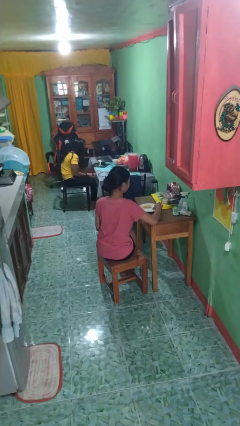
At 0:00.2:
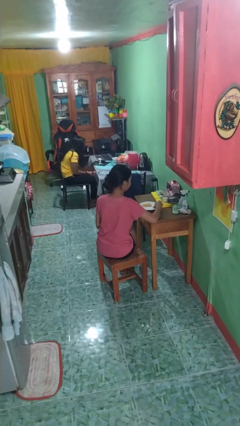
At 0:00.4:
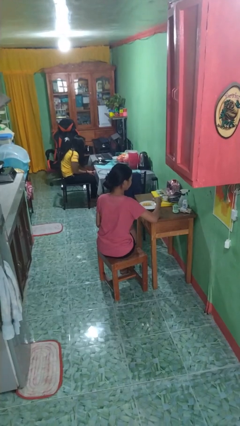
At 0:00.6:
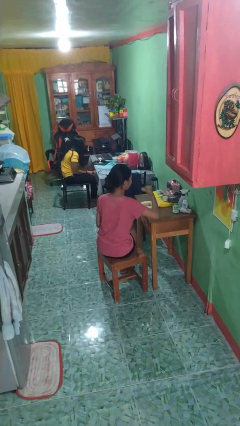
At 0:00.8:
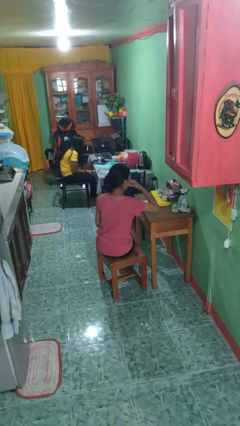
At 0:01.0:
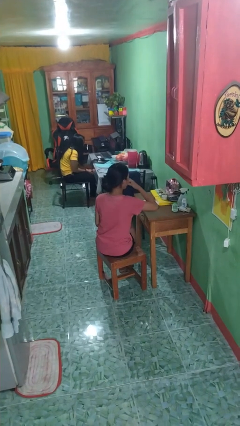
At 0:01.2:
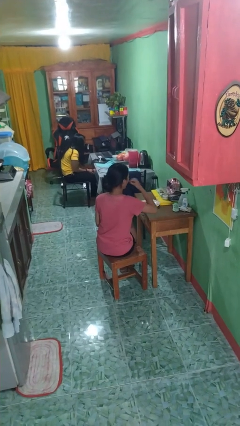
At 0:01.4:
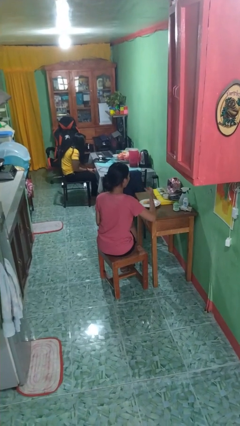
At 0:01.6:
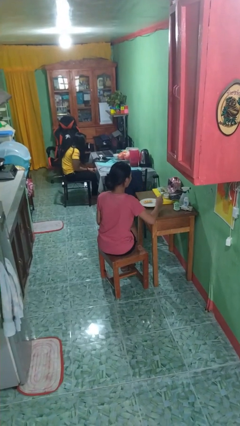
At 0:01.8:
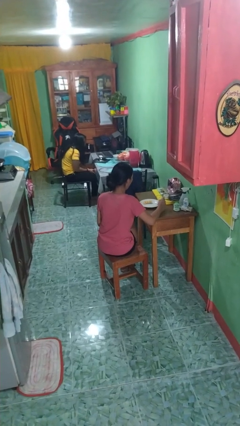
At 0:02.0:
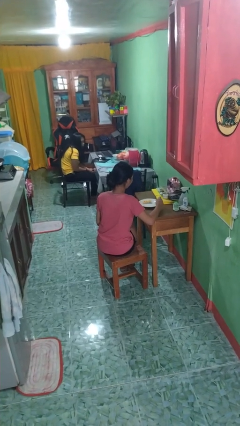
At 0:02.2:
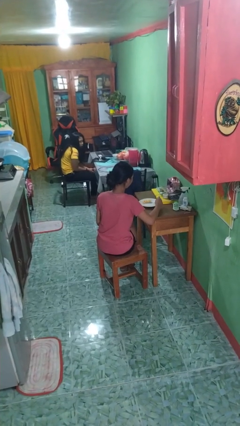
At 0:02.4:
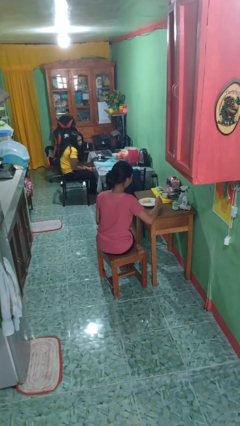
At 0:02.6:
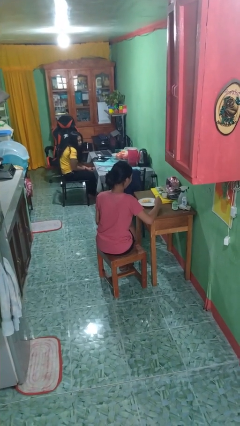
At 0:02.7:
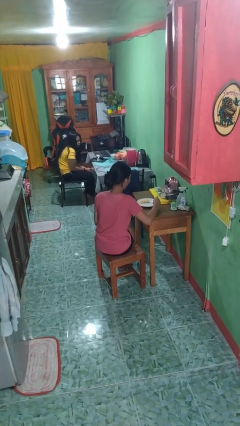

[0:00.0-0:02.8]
person eats with hands

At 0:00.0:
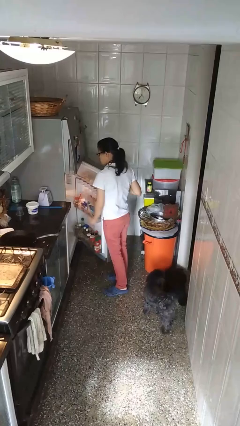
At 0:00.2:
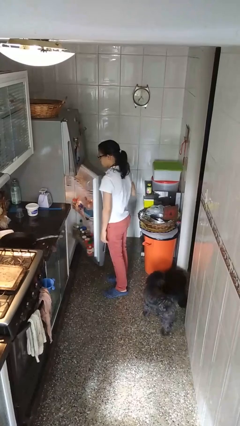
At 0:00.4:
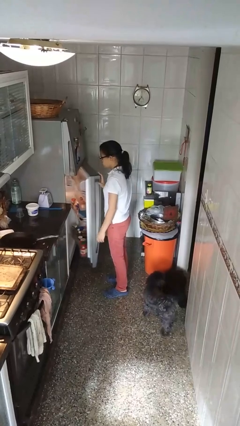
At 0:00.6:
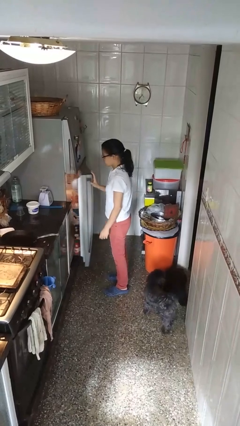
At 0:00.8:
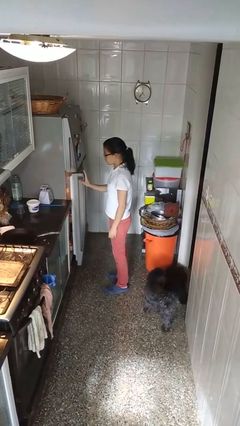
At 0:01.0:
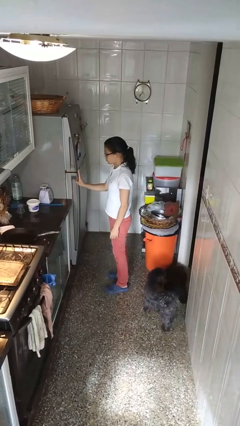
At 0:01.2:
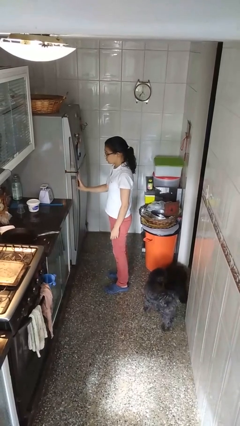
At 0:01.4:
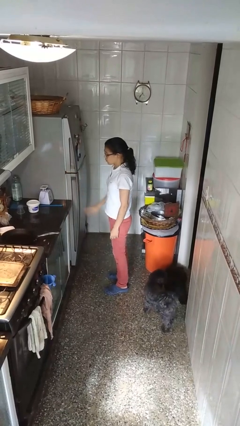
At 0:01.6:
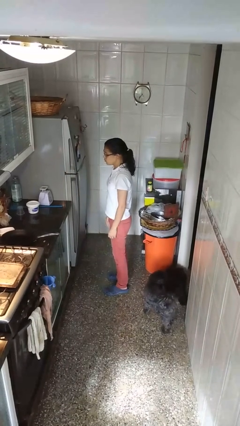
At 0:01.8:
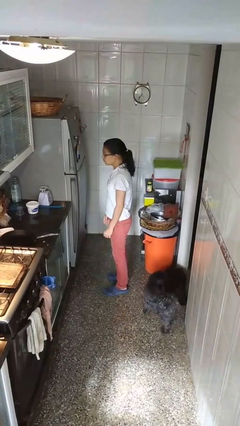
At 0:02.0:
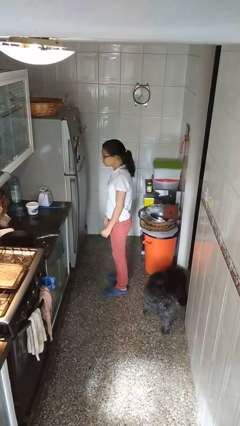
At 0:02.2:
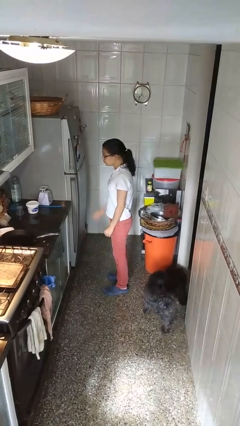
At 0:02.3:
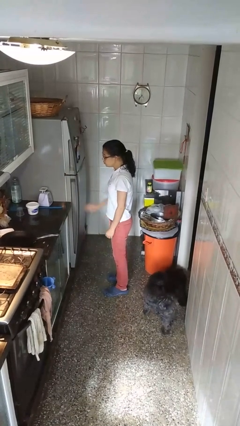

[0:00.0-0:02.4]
person closes refrigerator

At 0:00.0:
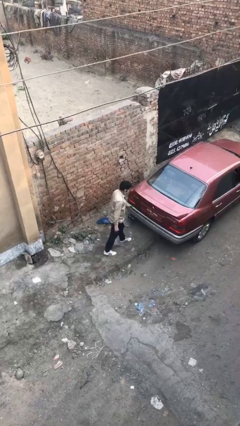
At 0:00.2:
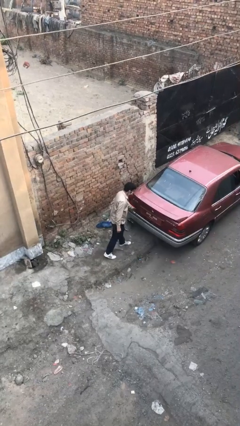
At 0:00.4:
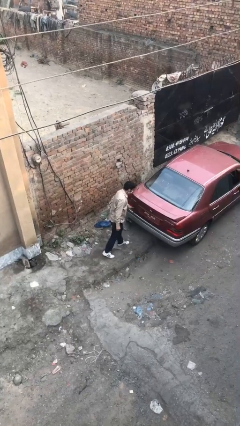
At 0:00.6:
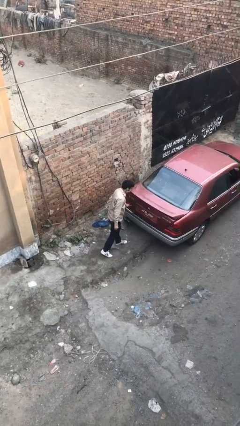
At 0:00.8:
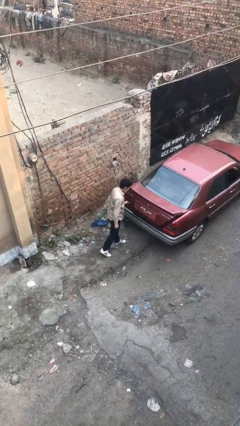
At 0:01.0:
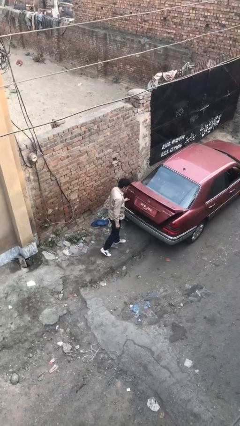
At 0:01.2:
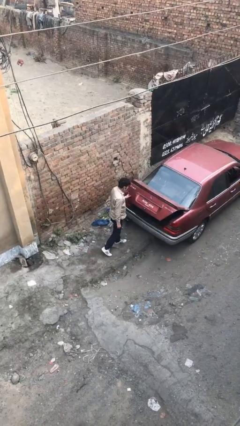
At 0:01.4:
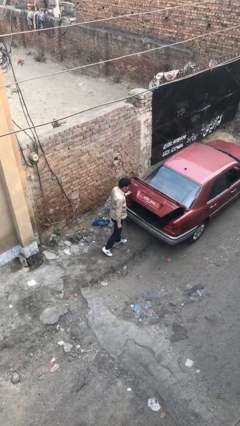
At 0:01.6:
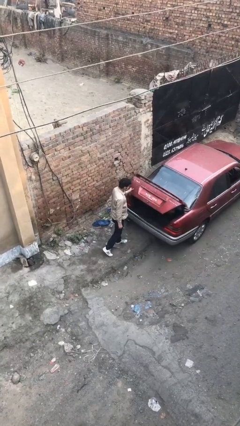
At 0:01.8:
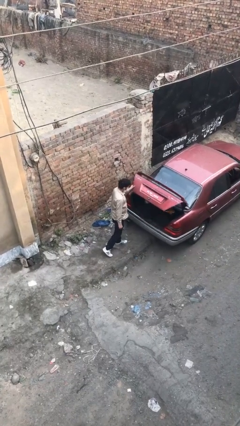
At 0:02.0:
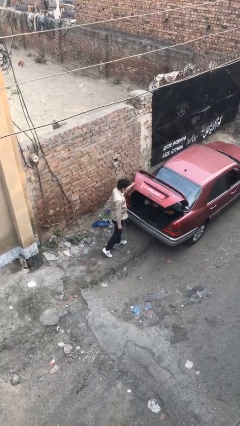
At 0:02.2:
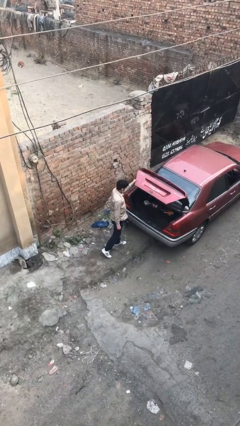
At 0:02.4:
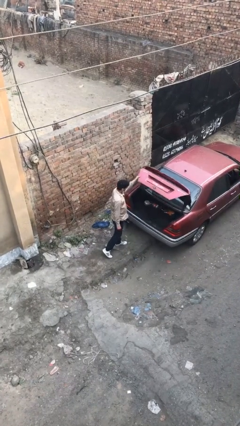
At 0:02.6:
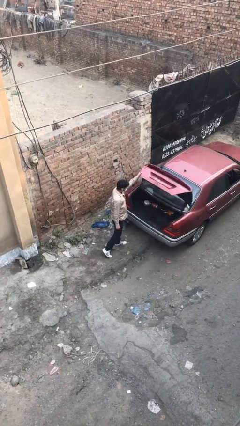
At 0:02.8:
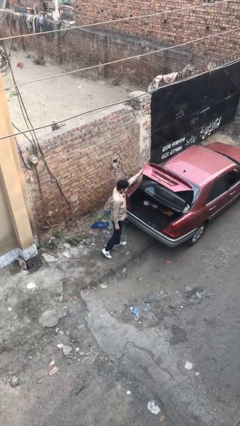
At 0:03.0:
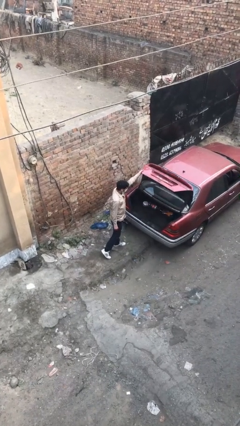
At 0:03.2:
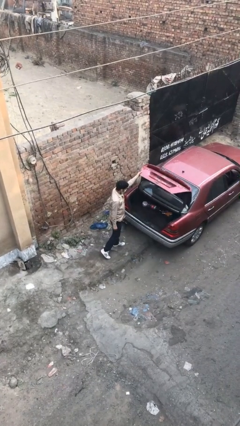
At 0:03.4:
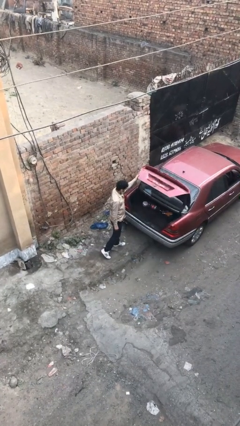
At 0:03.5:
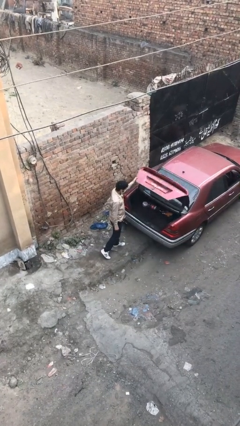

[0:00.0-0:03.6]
person opens car trunk

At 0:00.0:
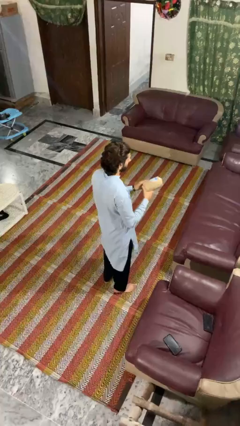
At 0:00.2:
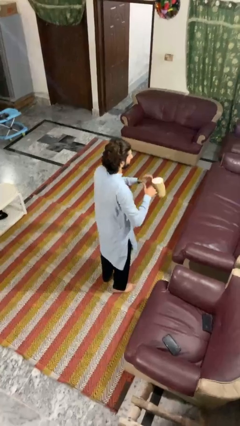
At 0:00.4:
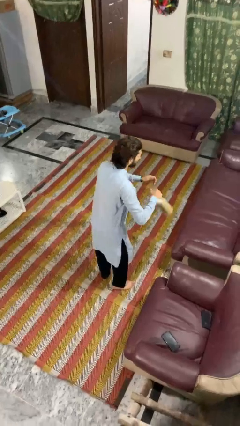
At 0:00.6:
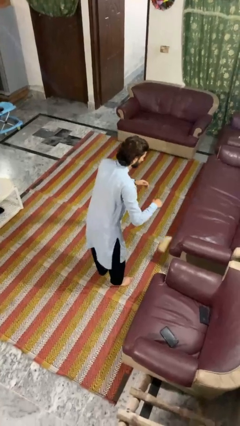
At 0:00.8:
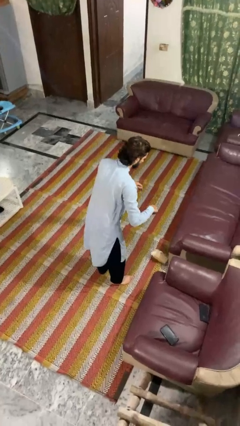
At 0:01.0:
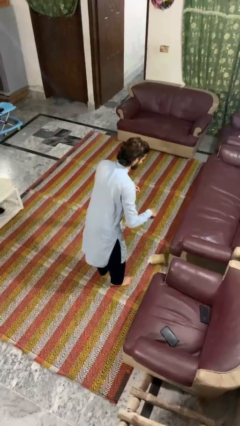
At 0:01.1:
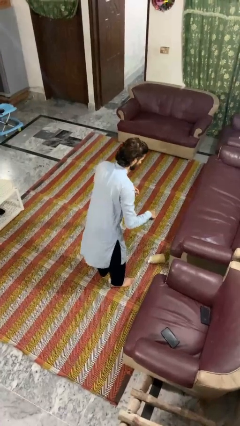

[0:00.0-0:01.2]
person drops object

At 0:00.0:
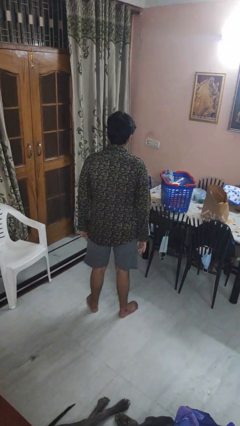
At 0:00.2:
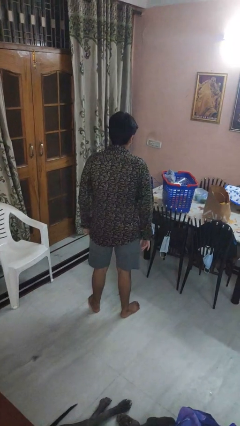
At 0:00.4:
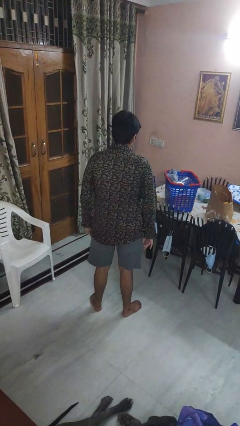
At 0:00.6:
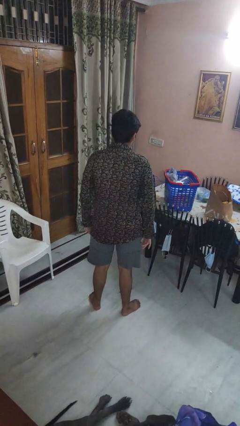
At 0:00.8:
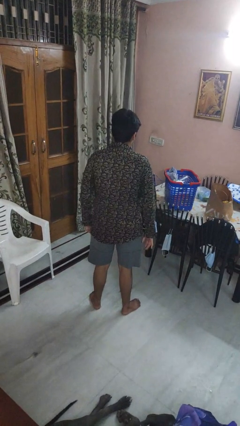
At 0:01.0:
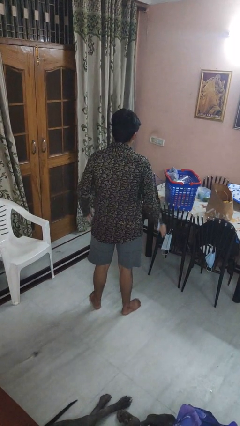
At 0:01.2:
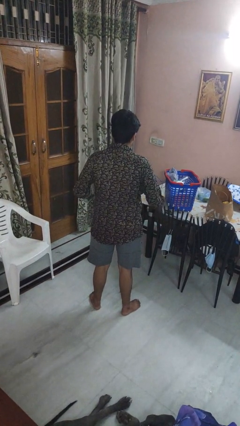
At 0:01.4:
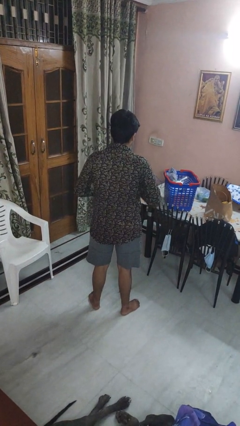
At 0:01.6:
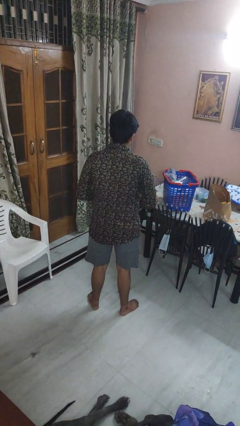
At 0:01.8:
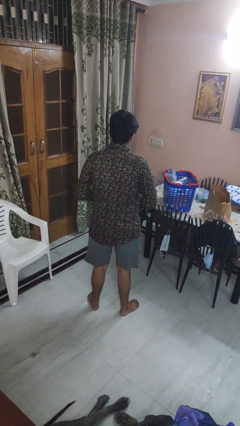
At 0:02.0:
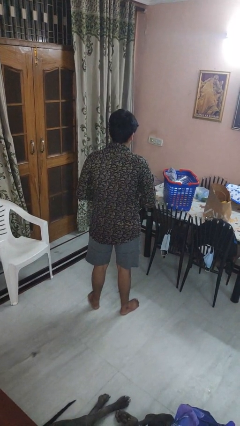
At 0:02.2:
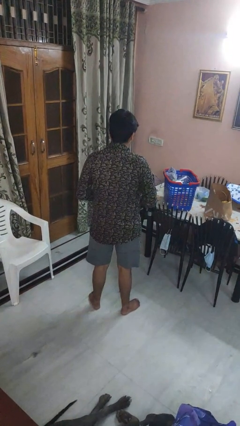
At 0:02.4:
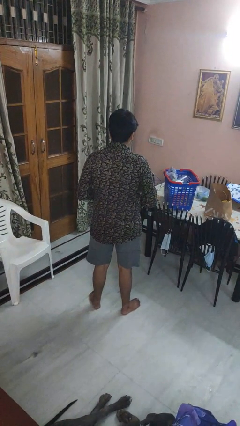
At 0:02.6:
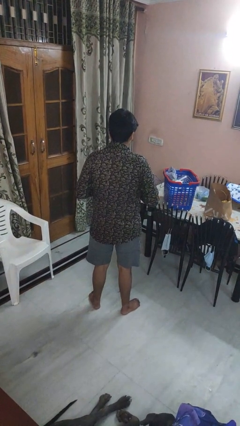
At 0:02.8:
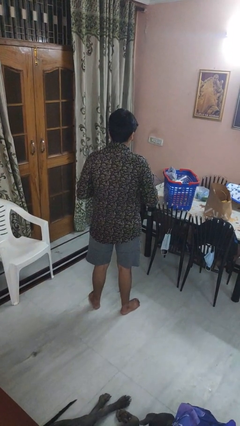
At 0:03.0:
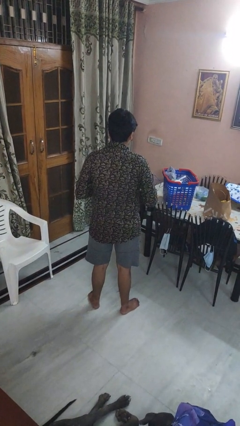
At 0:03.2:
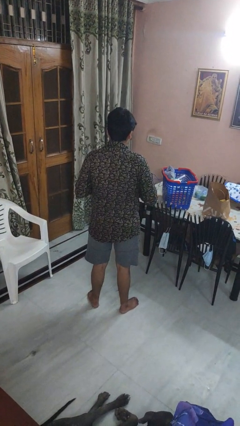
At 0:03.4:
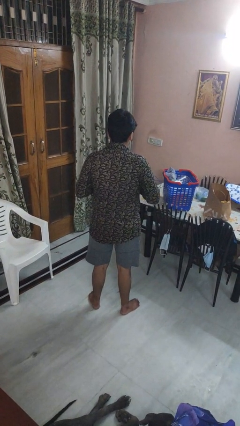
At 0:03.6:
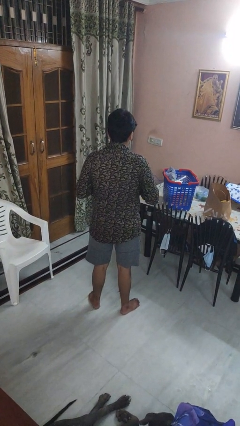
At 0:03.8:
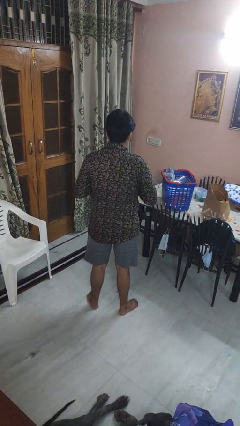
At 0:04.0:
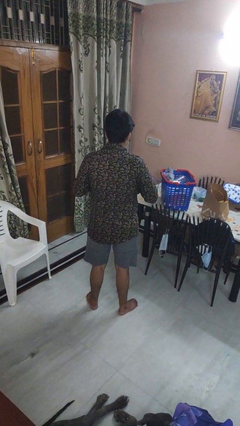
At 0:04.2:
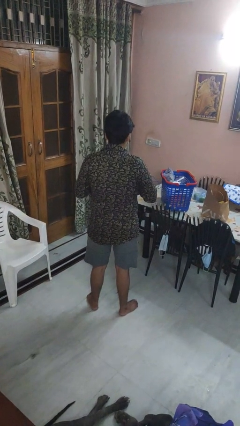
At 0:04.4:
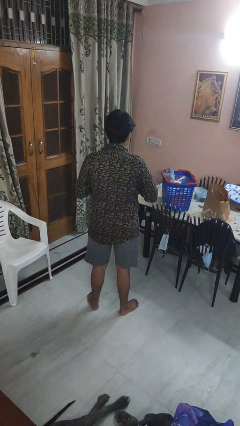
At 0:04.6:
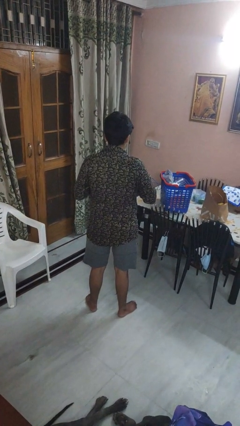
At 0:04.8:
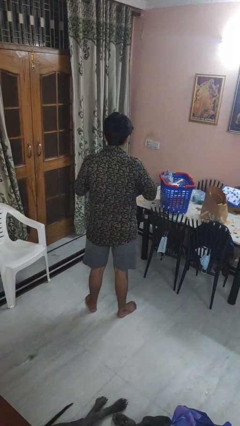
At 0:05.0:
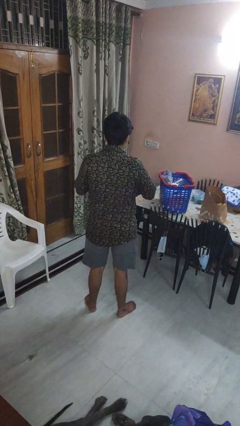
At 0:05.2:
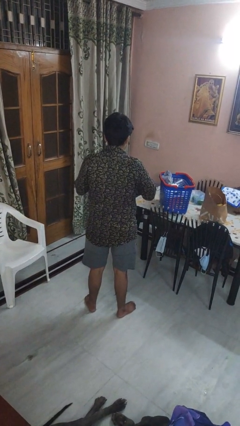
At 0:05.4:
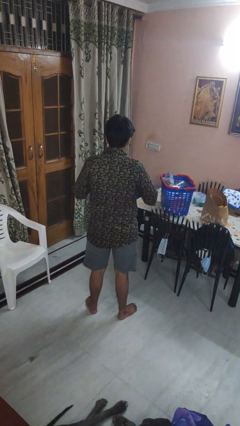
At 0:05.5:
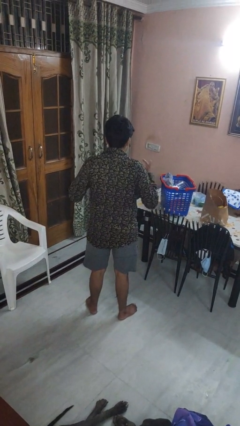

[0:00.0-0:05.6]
person unbuttons shirt

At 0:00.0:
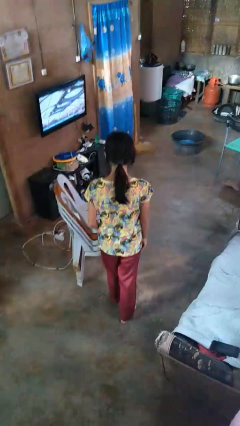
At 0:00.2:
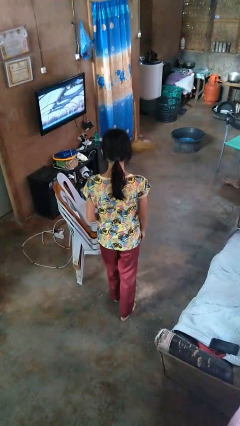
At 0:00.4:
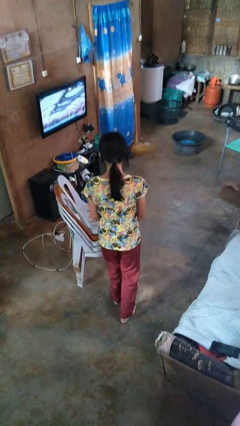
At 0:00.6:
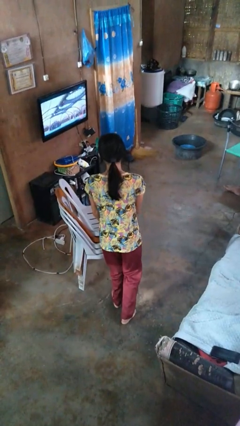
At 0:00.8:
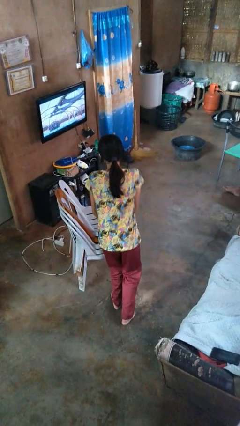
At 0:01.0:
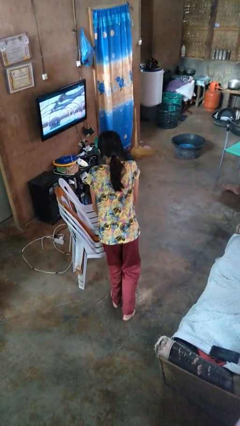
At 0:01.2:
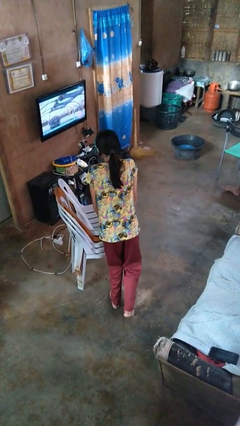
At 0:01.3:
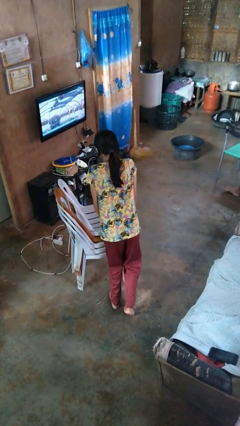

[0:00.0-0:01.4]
person trips on object on floor

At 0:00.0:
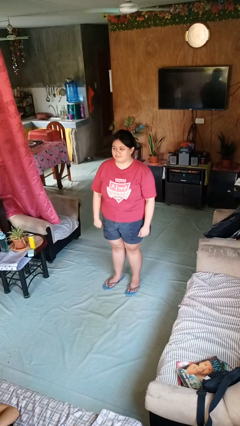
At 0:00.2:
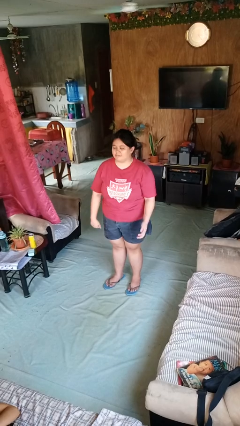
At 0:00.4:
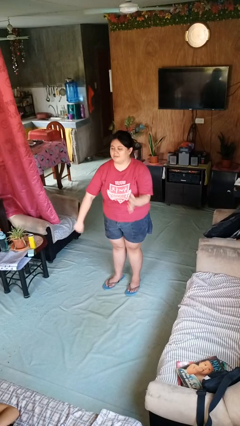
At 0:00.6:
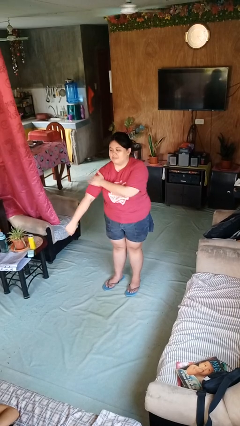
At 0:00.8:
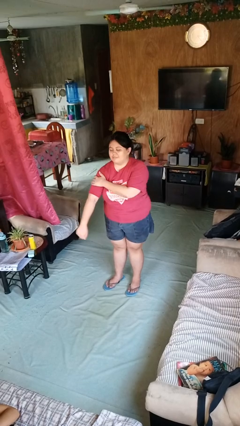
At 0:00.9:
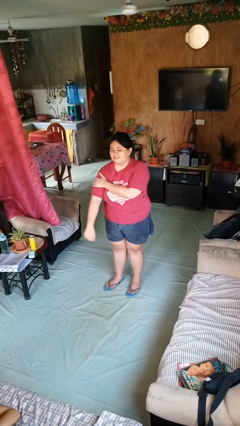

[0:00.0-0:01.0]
person swats bug
